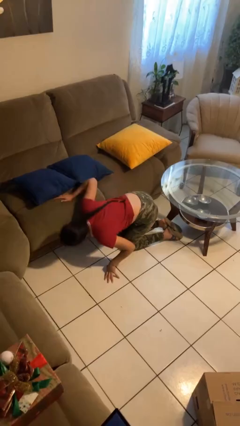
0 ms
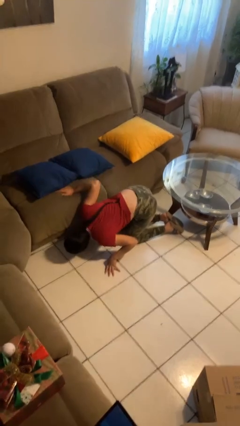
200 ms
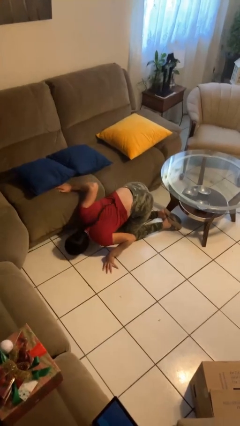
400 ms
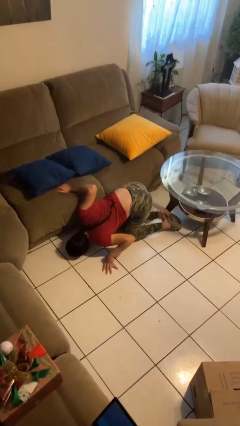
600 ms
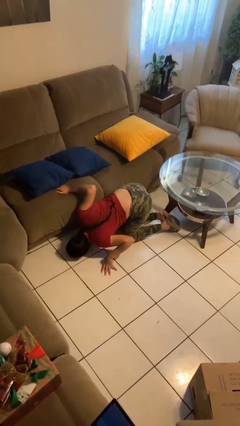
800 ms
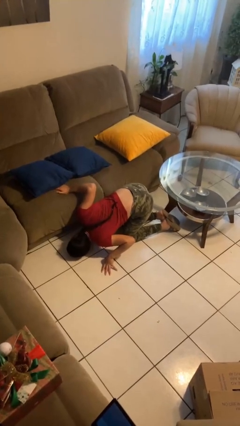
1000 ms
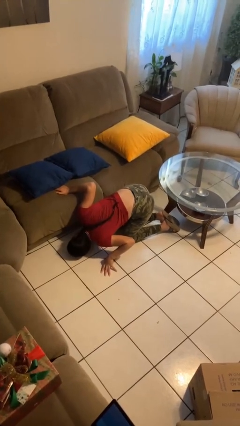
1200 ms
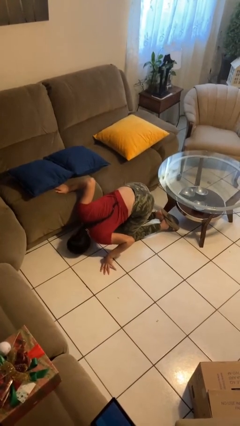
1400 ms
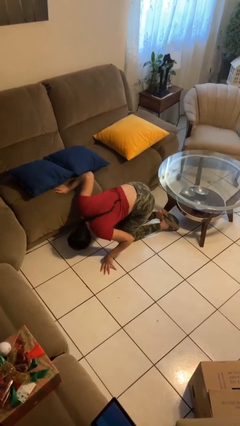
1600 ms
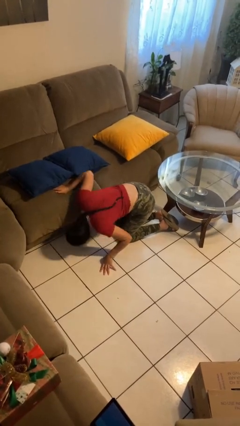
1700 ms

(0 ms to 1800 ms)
person searches under couch

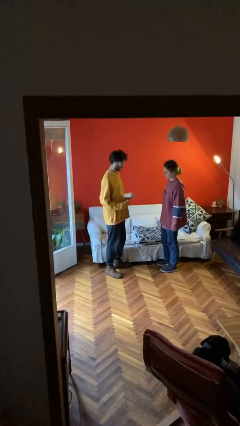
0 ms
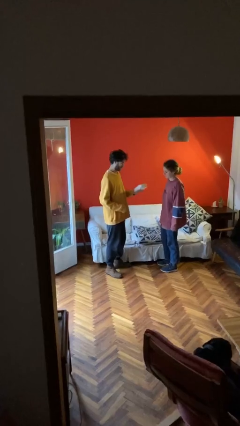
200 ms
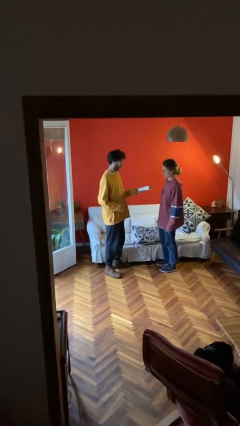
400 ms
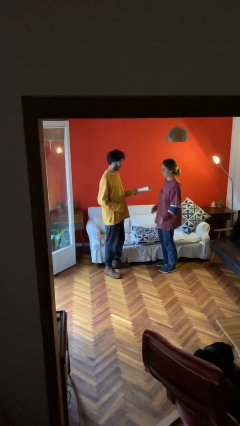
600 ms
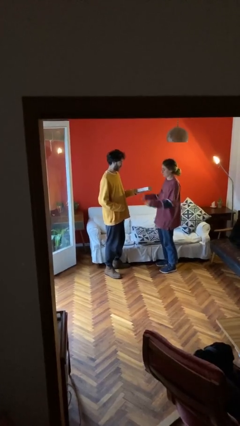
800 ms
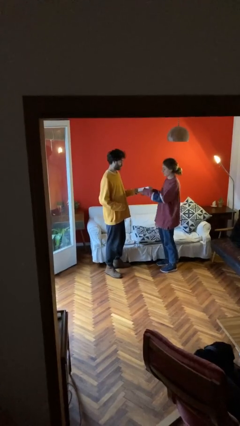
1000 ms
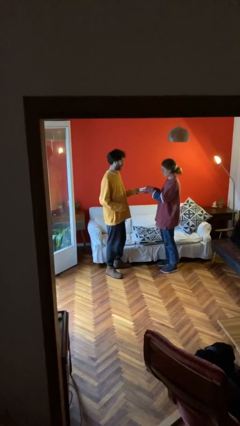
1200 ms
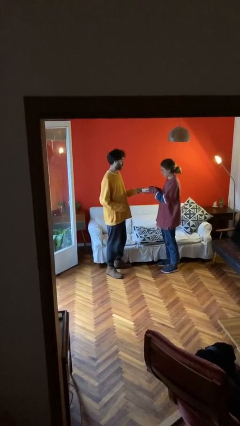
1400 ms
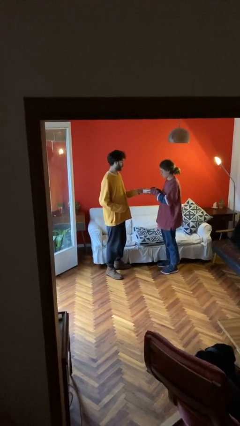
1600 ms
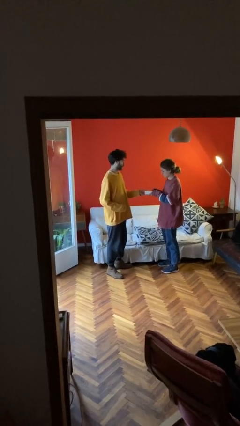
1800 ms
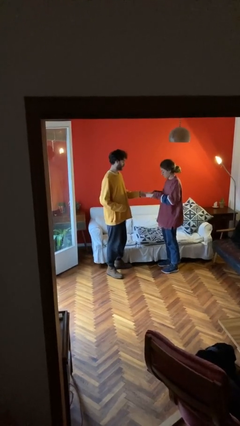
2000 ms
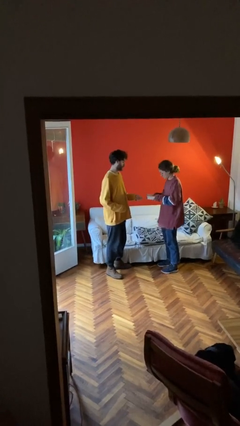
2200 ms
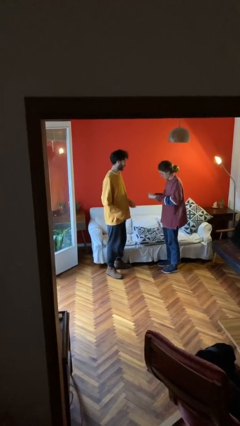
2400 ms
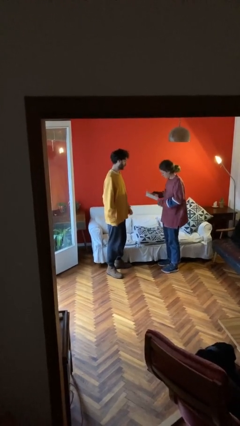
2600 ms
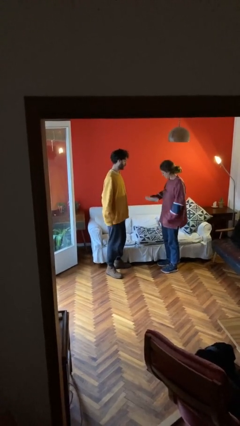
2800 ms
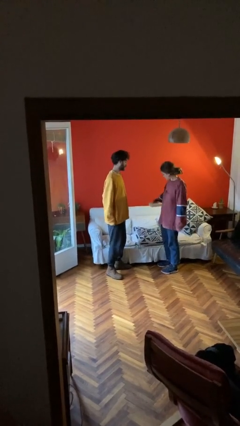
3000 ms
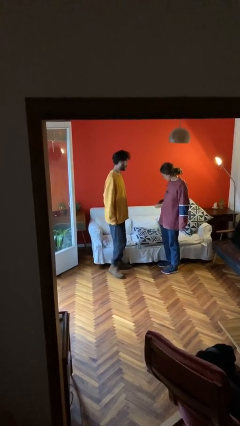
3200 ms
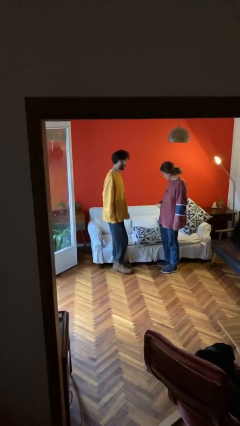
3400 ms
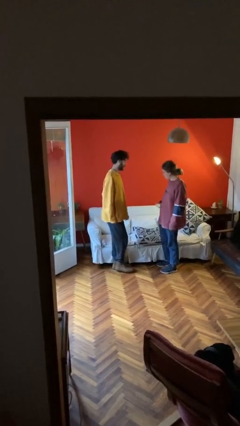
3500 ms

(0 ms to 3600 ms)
person transfers object to person

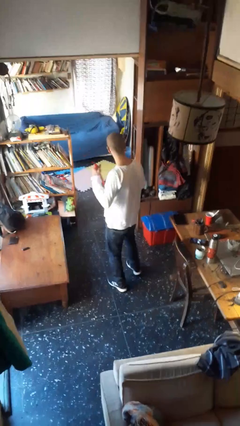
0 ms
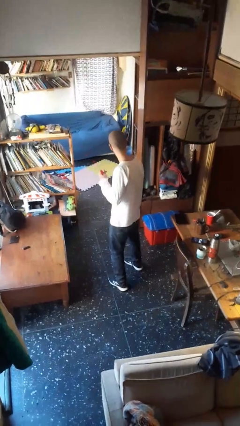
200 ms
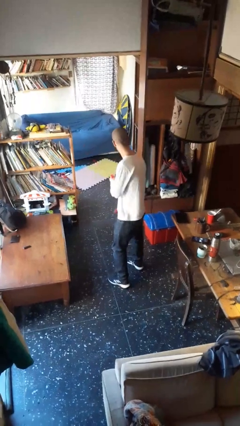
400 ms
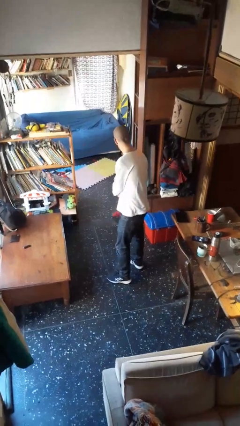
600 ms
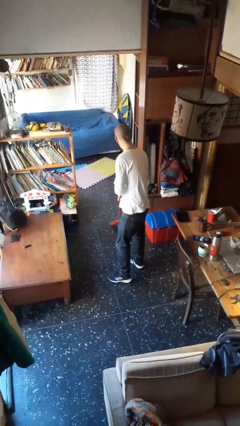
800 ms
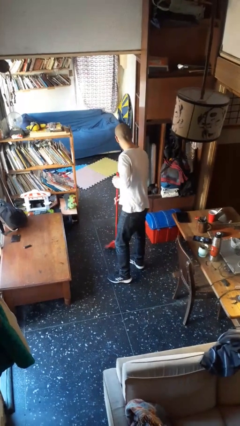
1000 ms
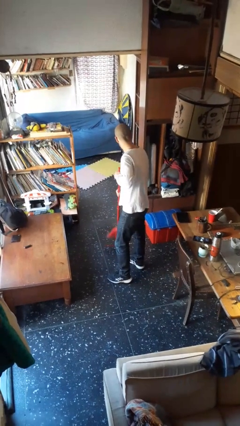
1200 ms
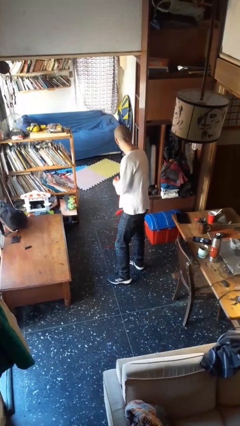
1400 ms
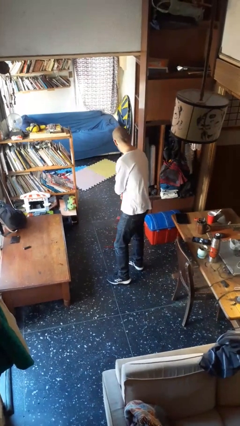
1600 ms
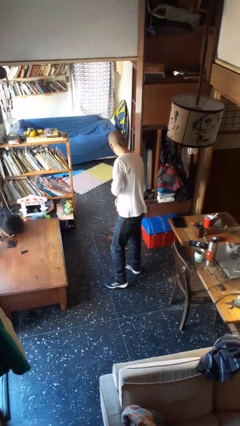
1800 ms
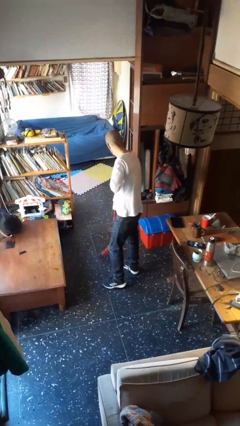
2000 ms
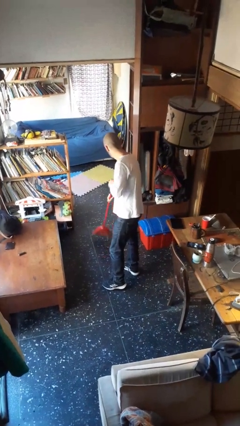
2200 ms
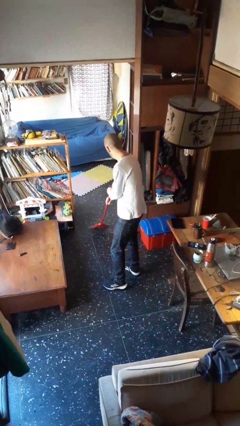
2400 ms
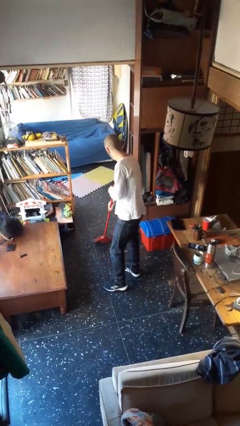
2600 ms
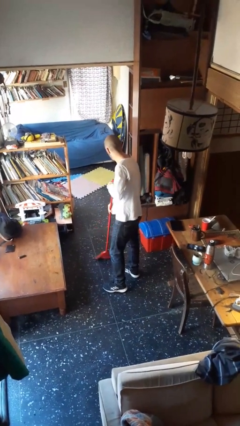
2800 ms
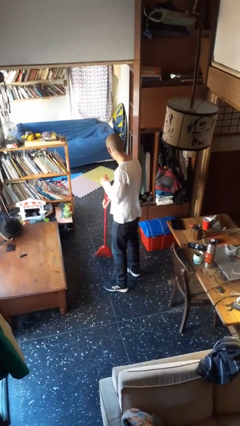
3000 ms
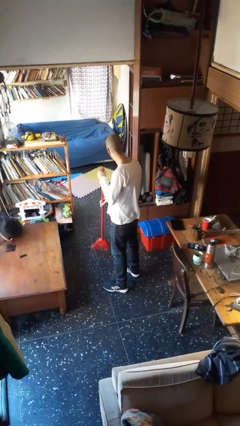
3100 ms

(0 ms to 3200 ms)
person sweeps floor

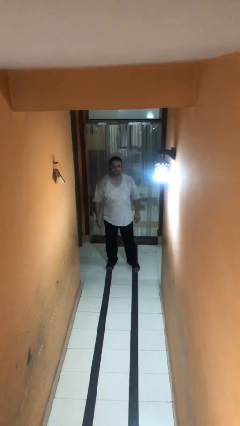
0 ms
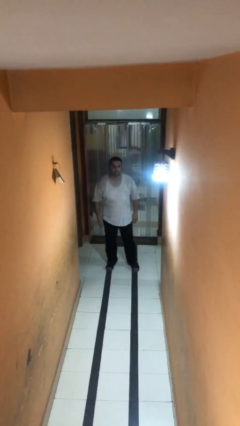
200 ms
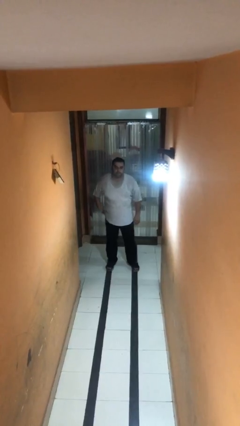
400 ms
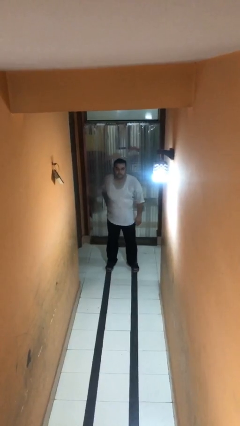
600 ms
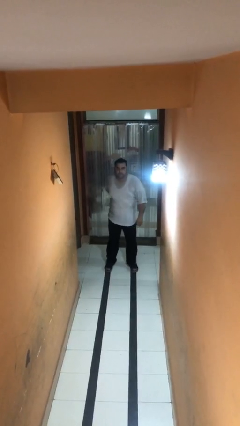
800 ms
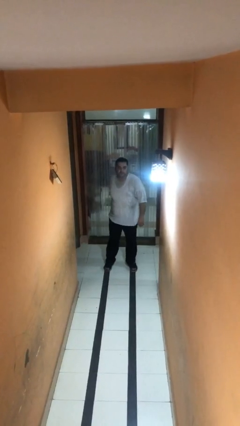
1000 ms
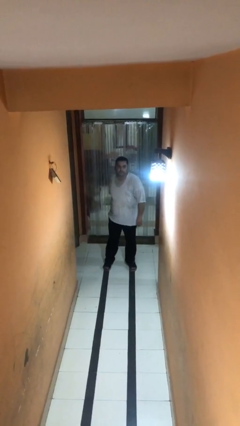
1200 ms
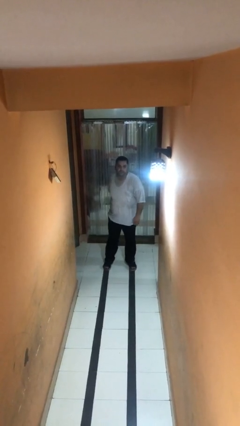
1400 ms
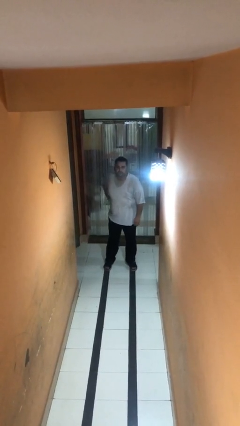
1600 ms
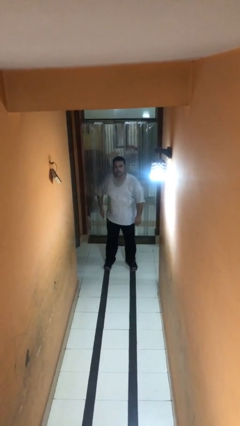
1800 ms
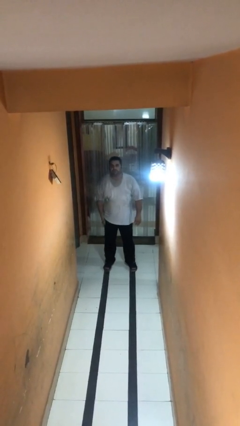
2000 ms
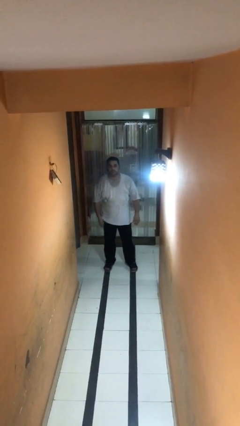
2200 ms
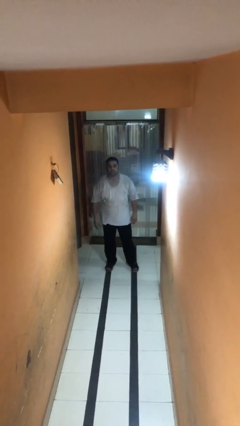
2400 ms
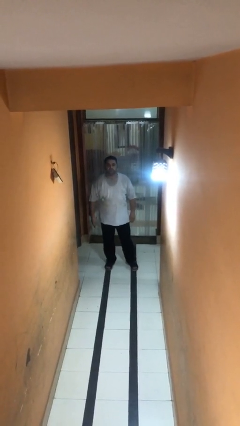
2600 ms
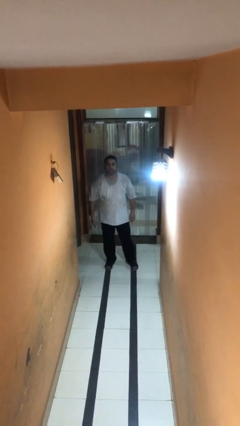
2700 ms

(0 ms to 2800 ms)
person puts hands in back pockets

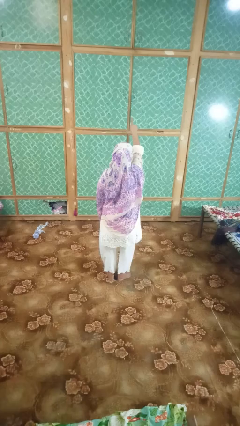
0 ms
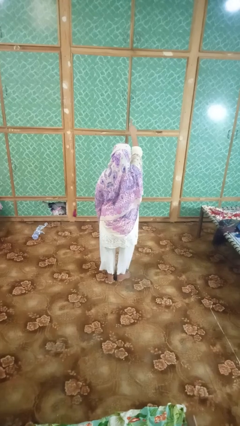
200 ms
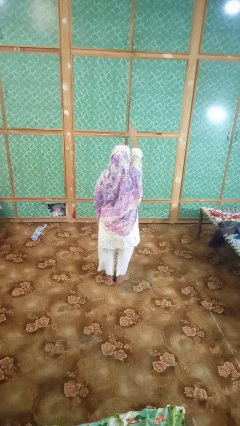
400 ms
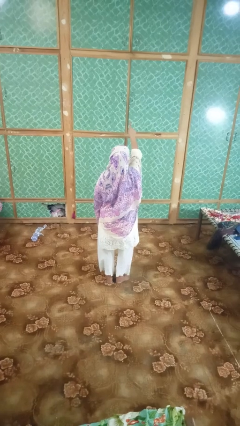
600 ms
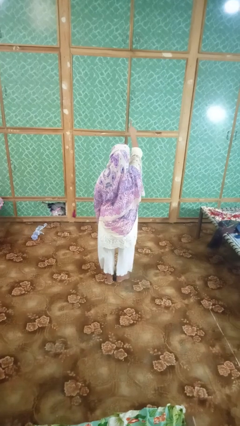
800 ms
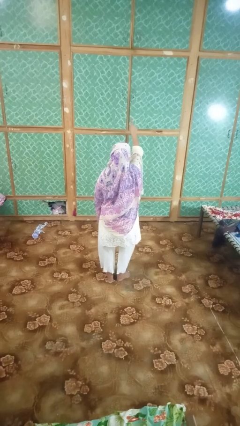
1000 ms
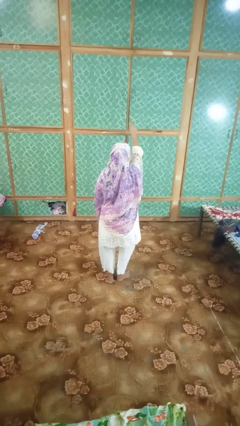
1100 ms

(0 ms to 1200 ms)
person gestures number one

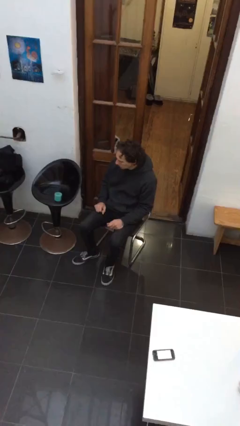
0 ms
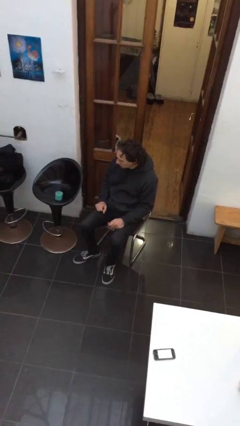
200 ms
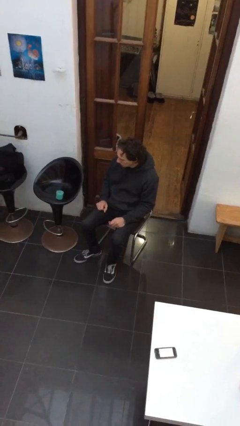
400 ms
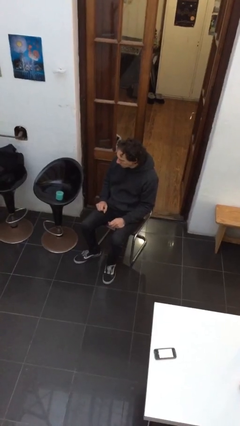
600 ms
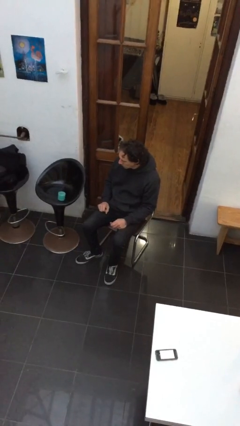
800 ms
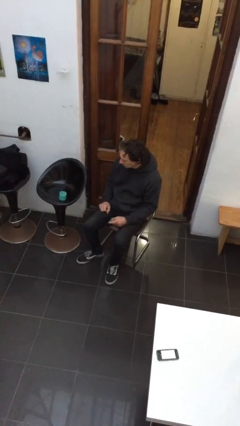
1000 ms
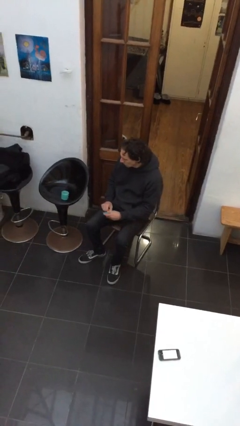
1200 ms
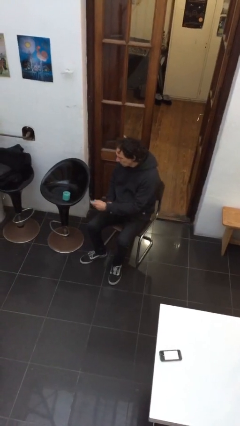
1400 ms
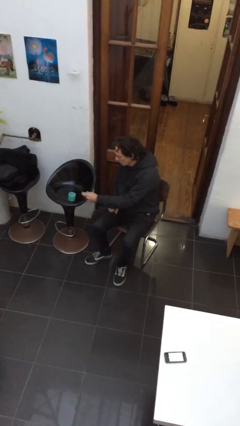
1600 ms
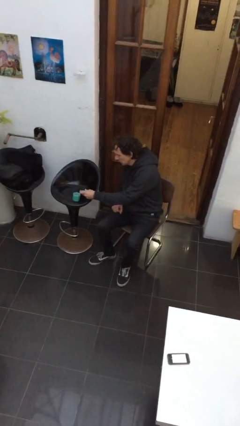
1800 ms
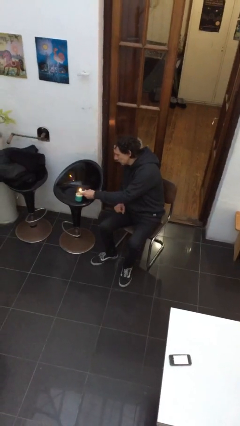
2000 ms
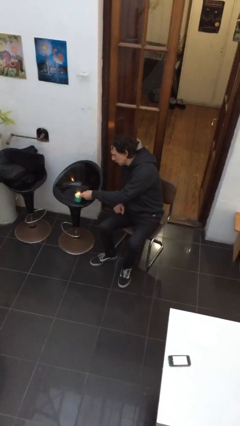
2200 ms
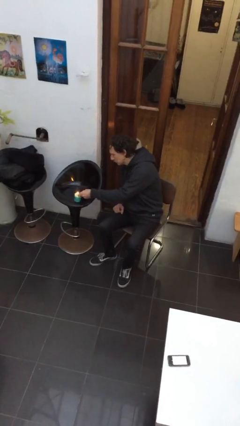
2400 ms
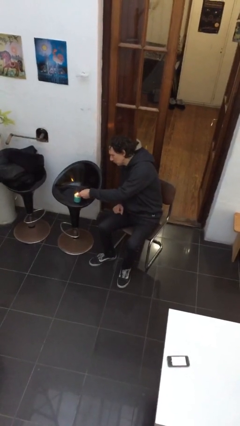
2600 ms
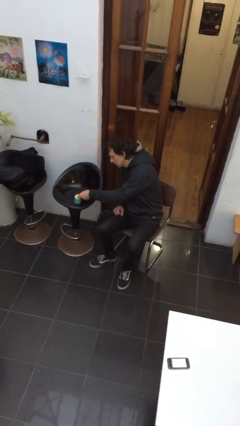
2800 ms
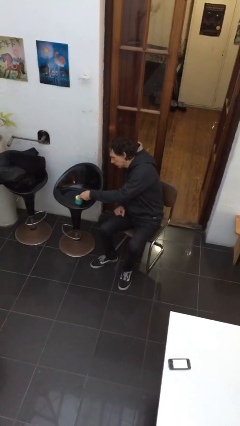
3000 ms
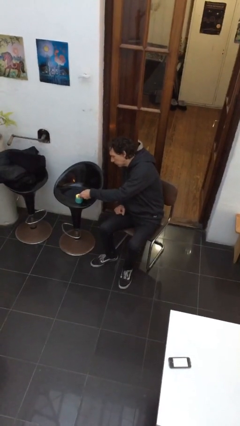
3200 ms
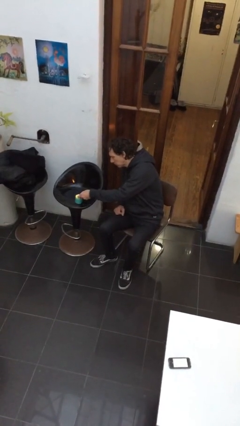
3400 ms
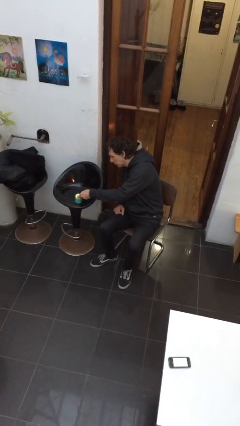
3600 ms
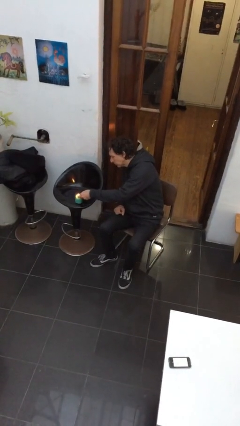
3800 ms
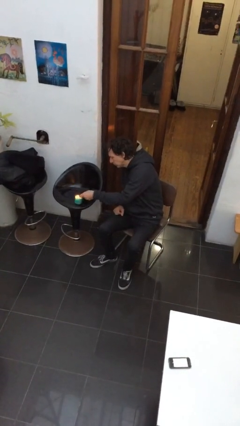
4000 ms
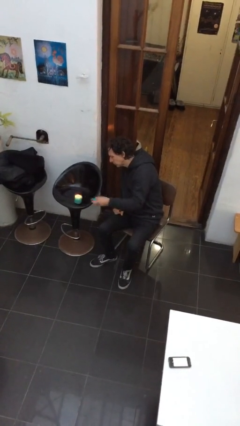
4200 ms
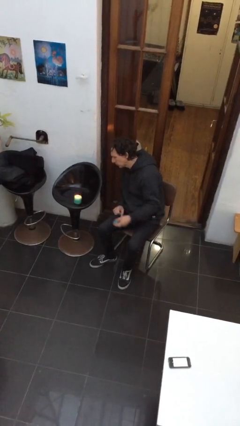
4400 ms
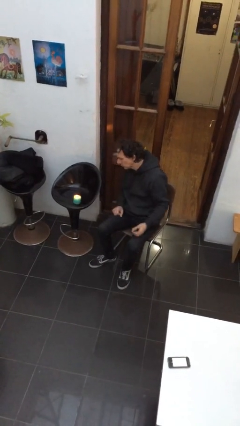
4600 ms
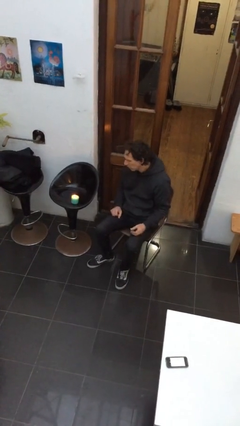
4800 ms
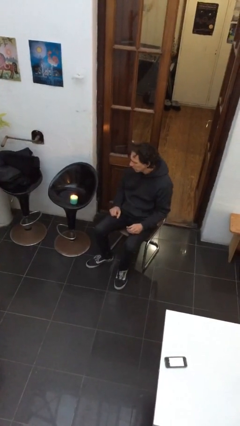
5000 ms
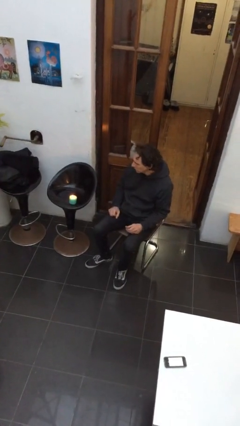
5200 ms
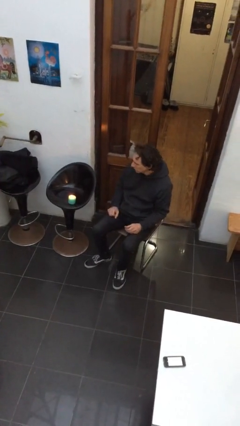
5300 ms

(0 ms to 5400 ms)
person lights candle
